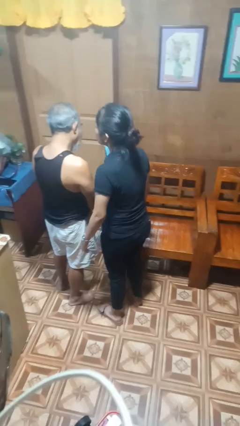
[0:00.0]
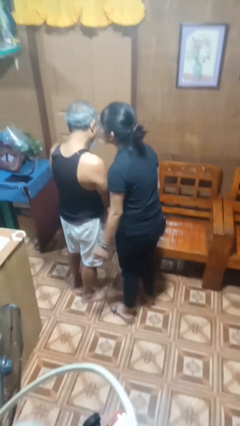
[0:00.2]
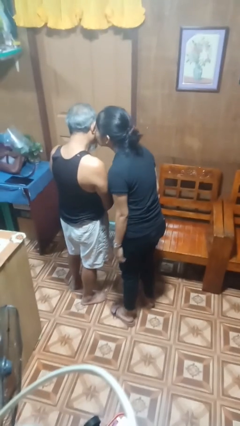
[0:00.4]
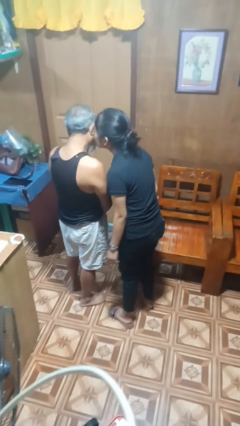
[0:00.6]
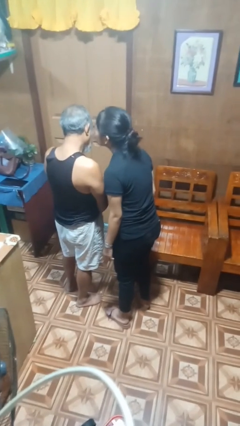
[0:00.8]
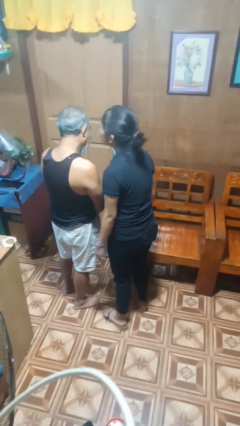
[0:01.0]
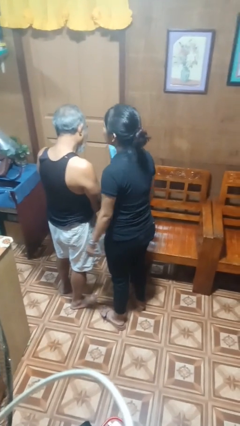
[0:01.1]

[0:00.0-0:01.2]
person kisses cheek of person

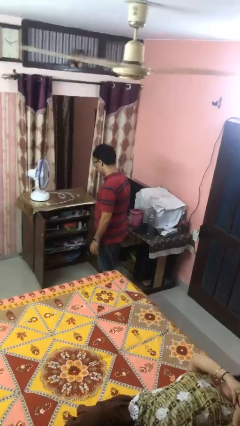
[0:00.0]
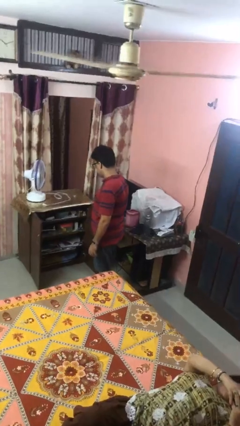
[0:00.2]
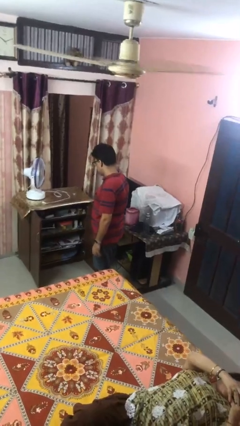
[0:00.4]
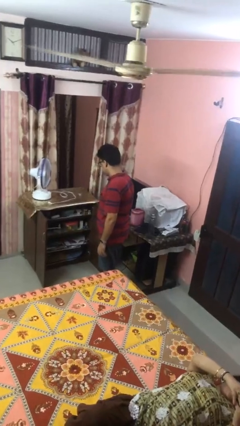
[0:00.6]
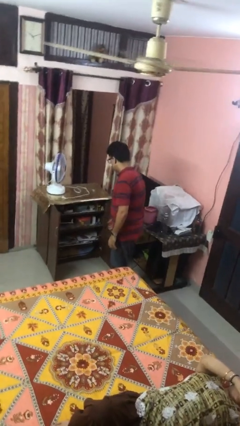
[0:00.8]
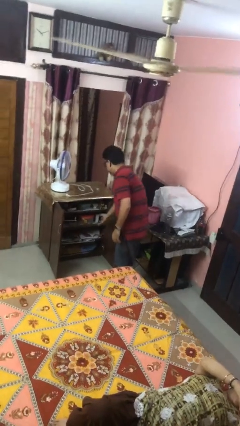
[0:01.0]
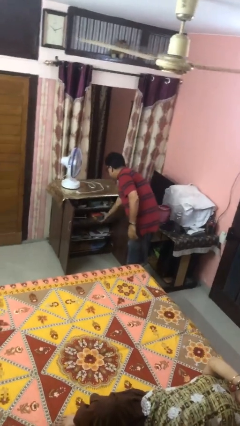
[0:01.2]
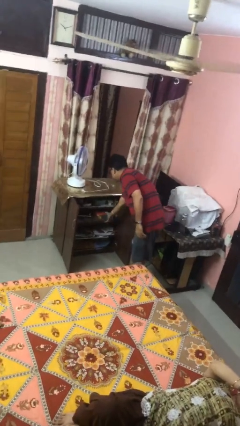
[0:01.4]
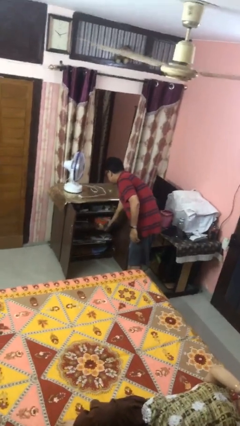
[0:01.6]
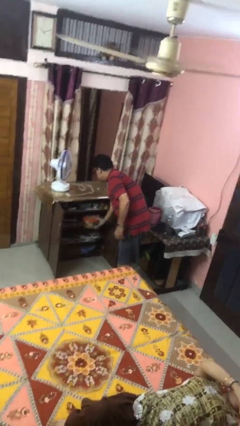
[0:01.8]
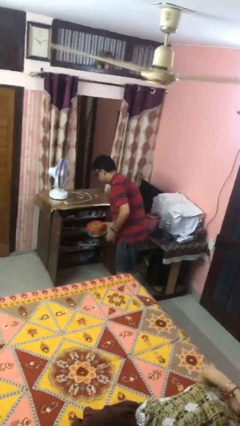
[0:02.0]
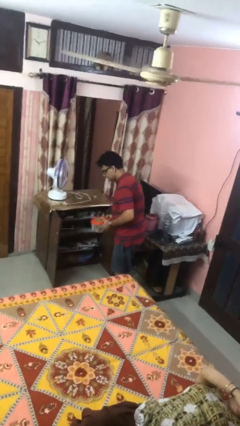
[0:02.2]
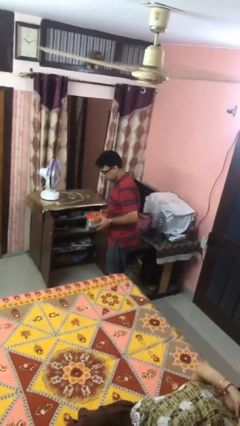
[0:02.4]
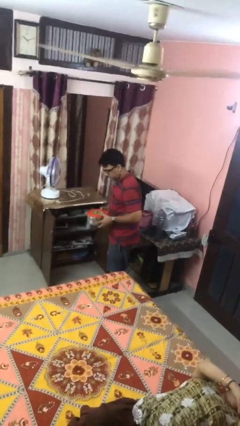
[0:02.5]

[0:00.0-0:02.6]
person picks up object from cabinet

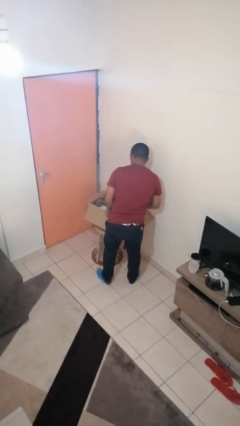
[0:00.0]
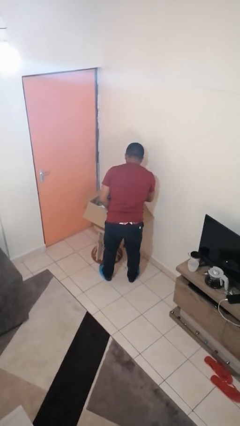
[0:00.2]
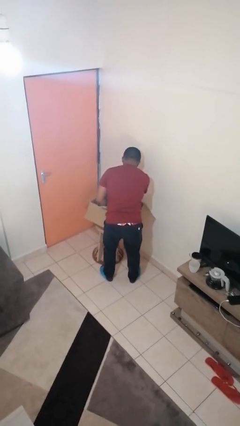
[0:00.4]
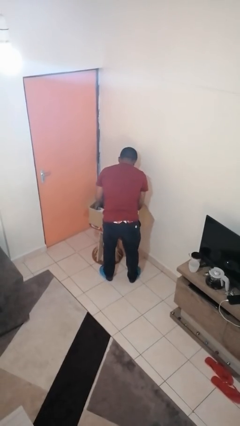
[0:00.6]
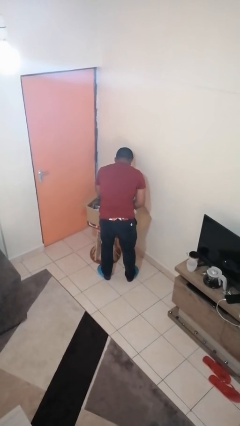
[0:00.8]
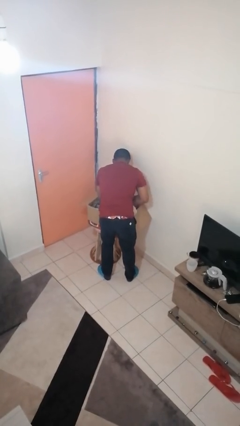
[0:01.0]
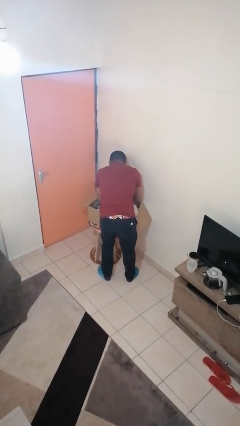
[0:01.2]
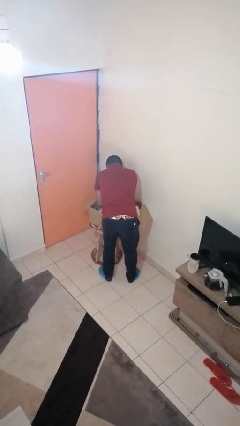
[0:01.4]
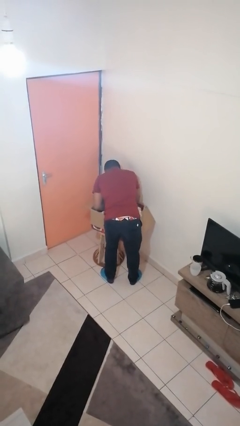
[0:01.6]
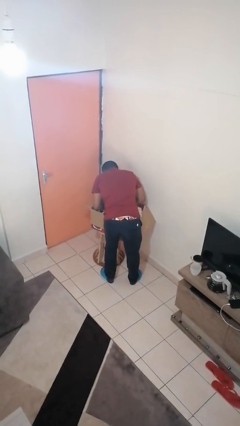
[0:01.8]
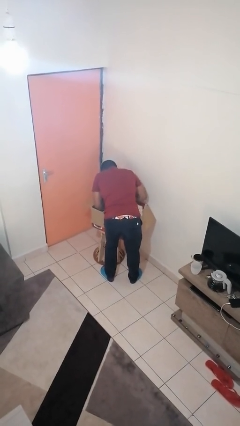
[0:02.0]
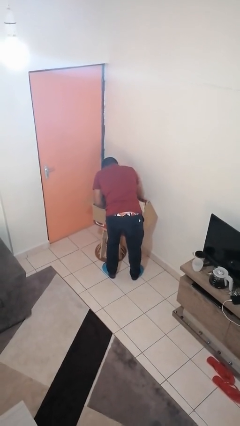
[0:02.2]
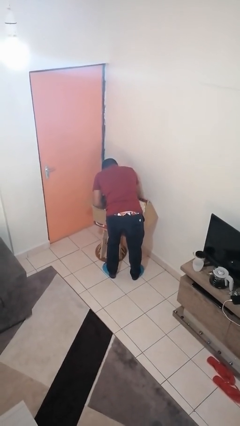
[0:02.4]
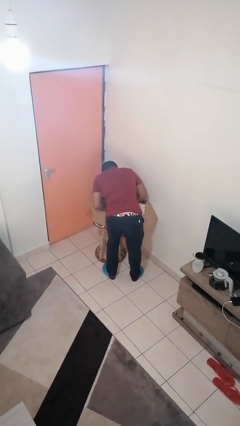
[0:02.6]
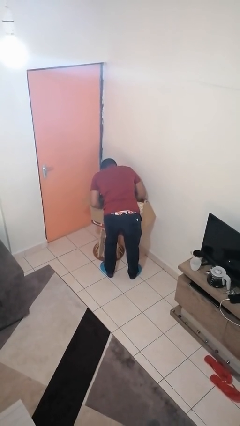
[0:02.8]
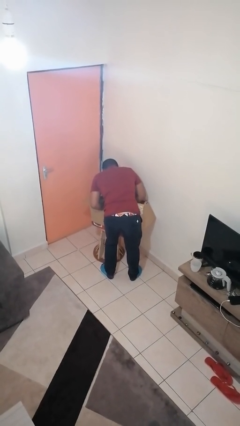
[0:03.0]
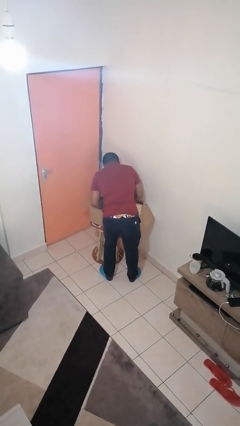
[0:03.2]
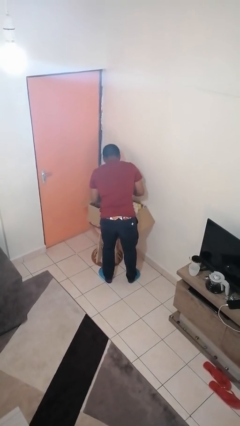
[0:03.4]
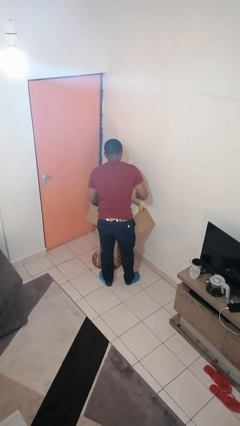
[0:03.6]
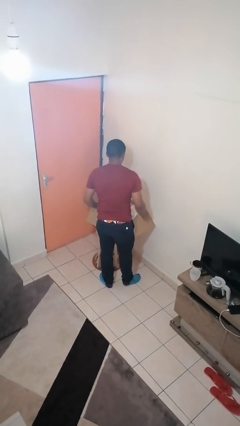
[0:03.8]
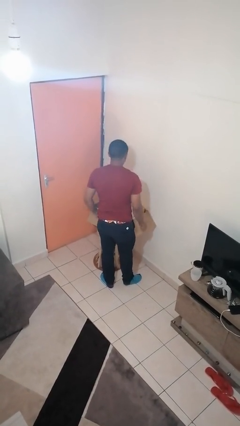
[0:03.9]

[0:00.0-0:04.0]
person searches in box

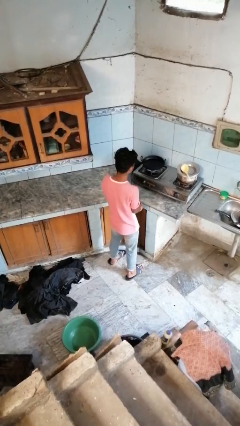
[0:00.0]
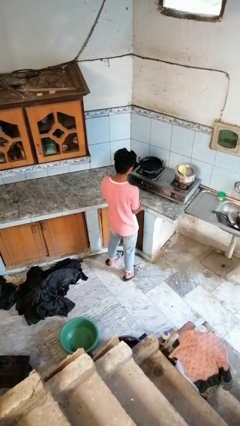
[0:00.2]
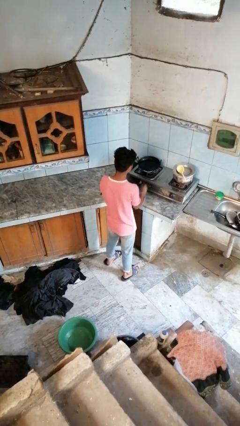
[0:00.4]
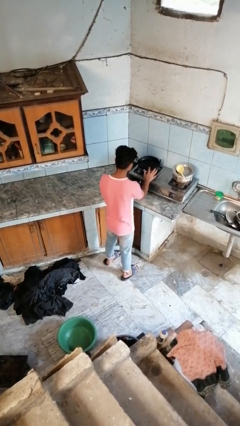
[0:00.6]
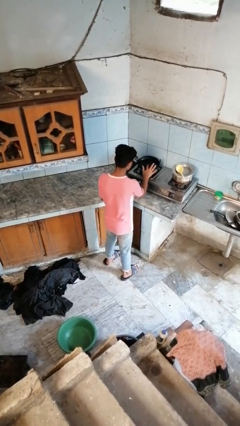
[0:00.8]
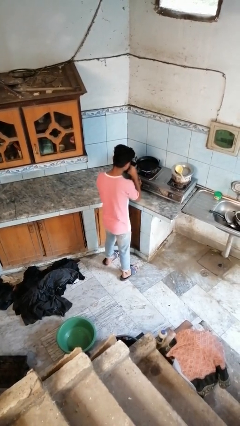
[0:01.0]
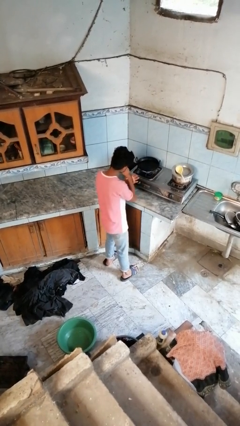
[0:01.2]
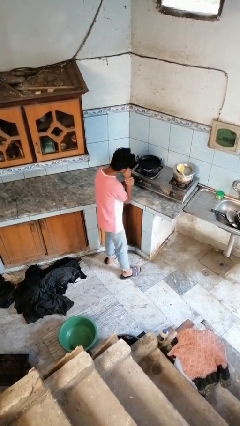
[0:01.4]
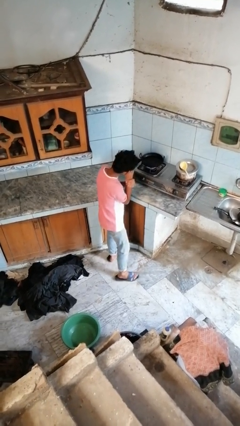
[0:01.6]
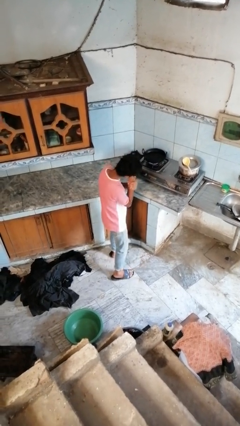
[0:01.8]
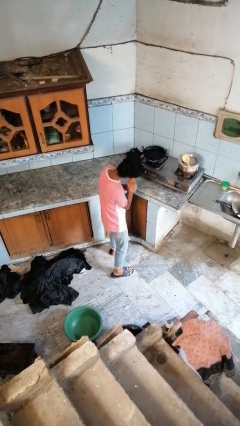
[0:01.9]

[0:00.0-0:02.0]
person burns hand

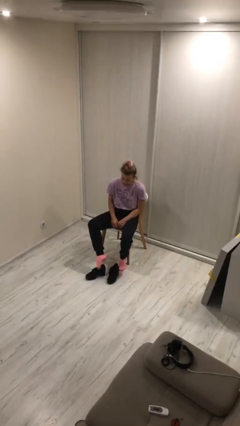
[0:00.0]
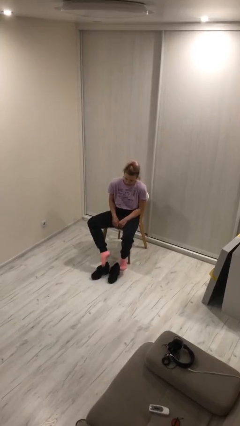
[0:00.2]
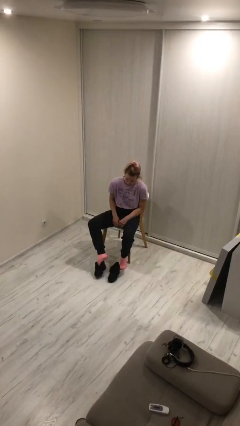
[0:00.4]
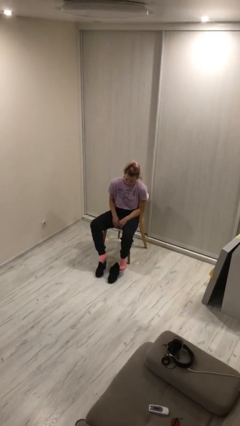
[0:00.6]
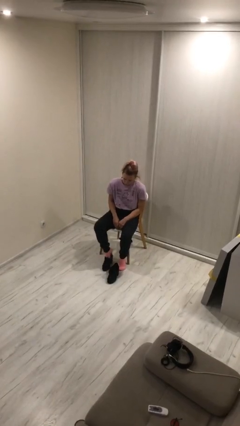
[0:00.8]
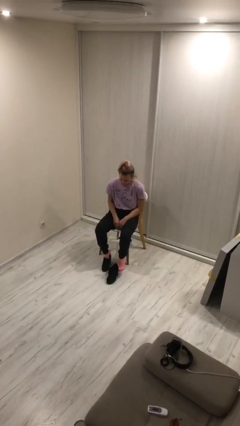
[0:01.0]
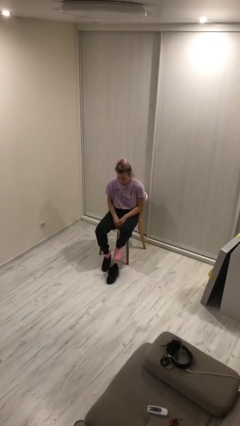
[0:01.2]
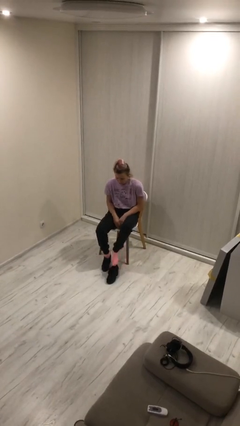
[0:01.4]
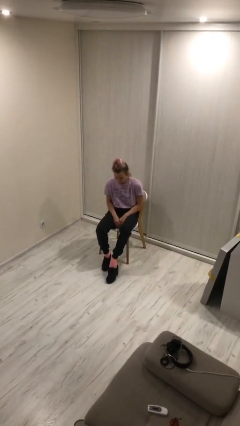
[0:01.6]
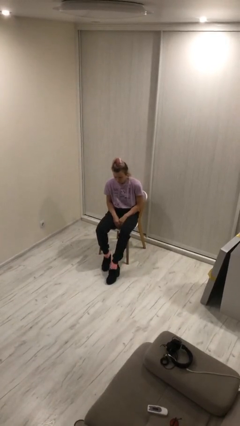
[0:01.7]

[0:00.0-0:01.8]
person puts on shoes

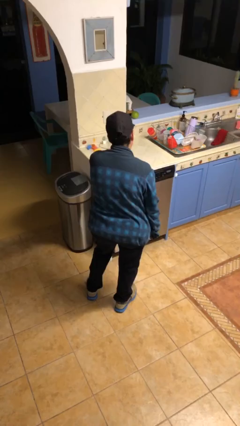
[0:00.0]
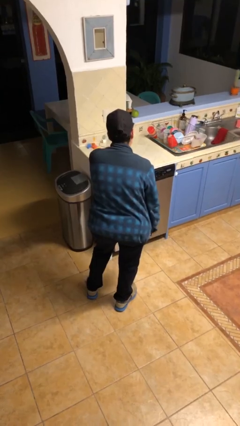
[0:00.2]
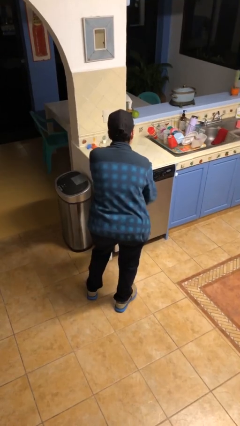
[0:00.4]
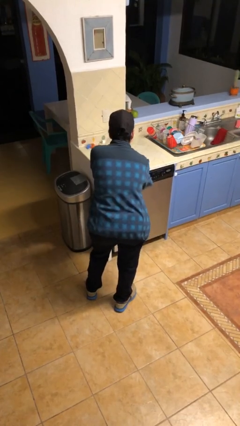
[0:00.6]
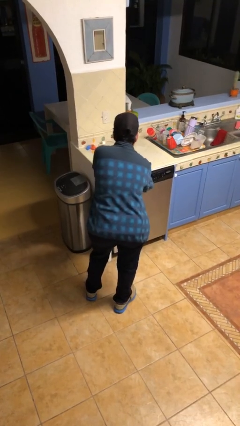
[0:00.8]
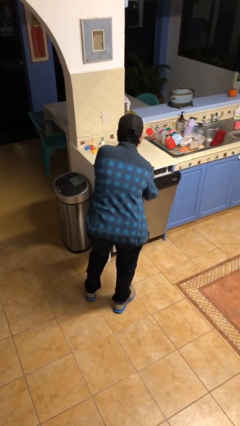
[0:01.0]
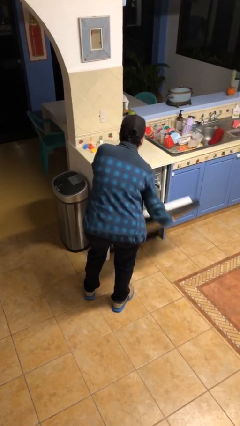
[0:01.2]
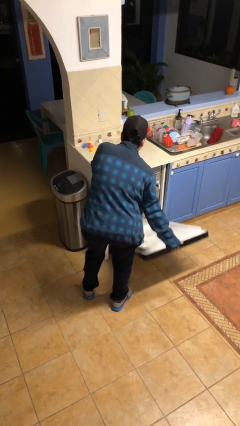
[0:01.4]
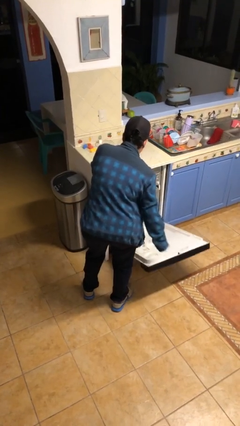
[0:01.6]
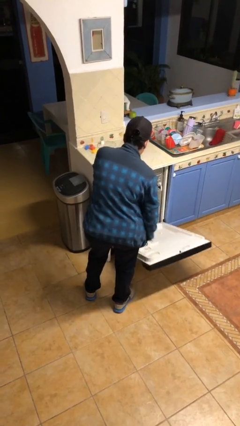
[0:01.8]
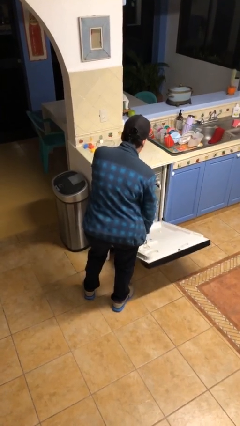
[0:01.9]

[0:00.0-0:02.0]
person opens dishwasher

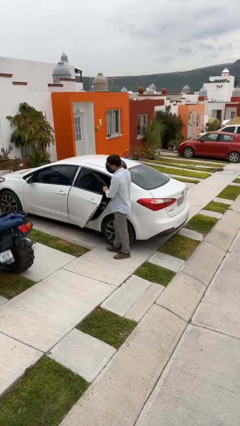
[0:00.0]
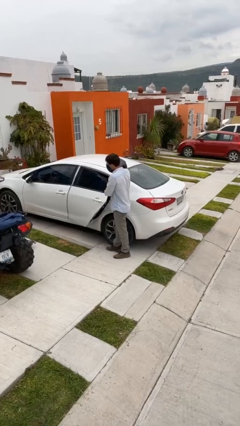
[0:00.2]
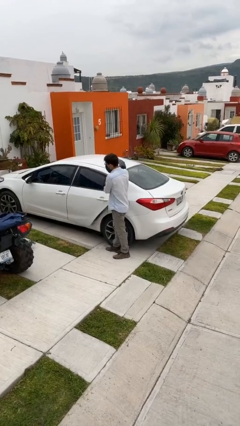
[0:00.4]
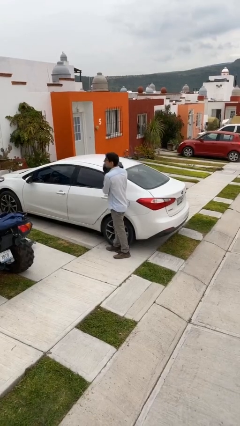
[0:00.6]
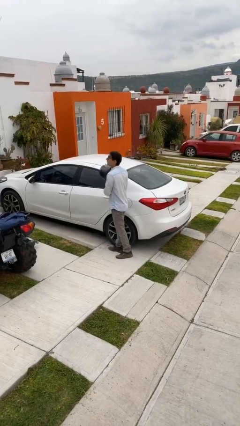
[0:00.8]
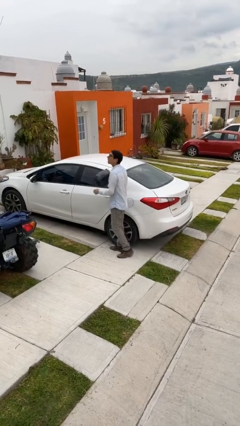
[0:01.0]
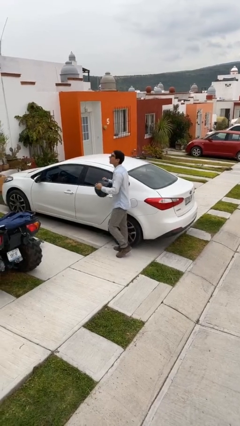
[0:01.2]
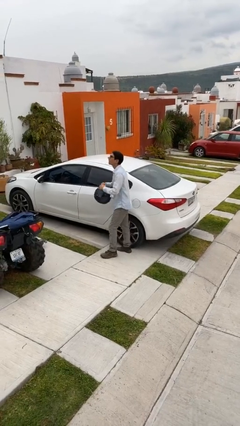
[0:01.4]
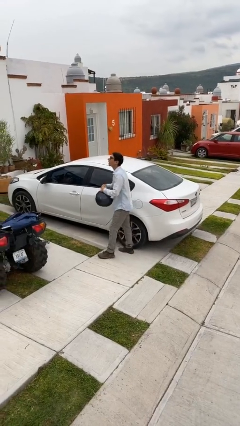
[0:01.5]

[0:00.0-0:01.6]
person closes car door

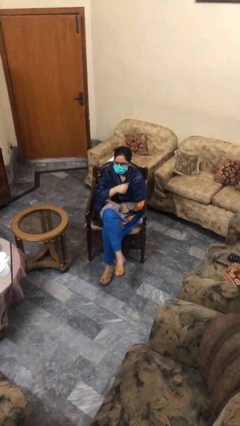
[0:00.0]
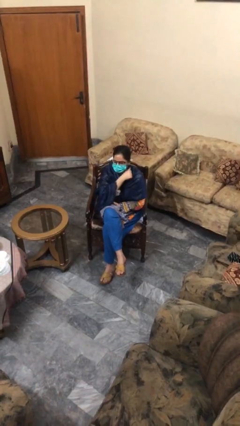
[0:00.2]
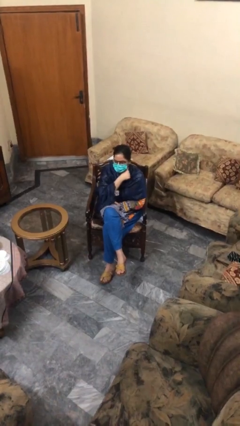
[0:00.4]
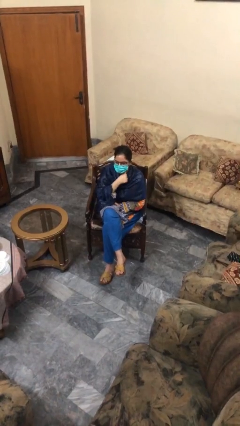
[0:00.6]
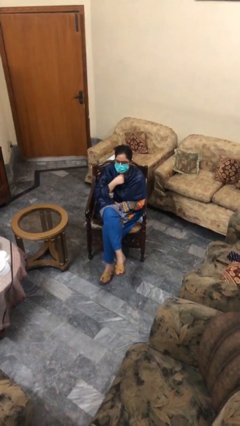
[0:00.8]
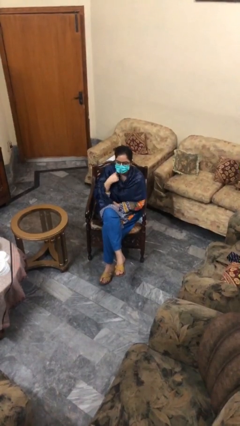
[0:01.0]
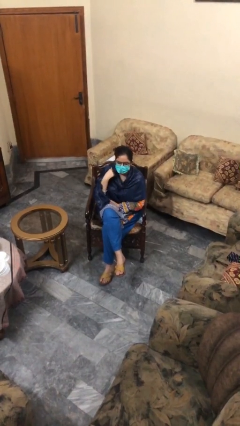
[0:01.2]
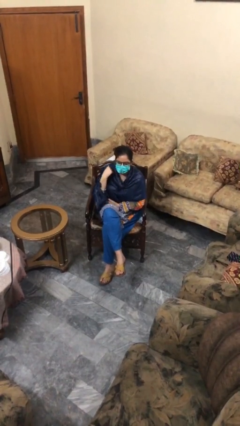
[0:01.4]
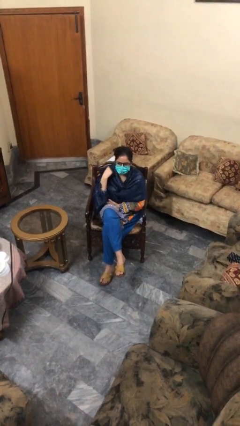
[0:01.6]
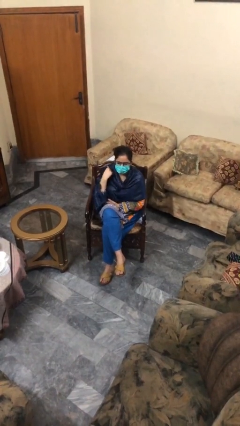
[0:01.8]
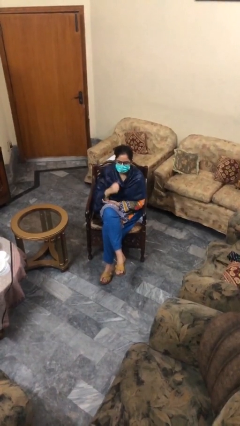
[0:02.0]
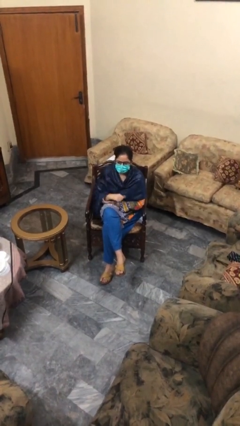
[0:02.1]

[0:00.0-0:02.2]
person gestures cut
